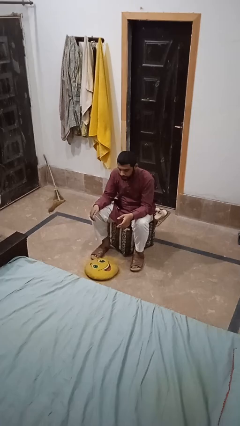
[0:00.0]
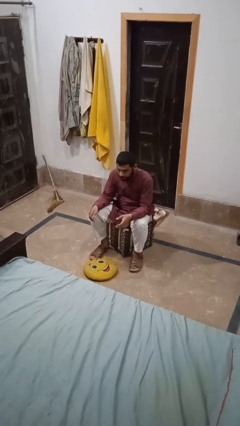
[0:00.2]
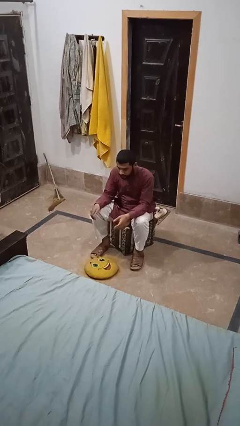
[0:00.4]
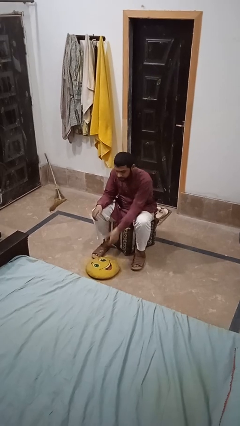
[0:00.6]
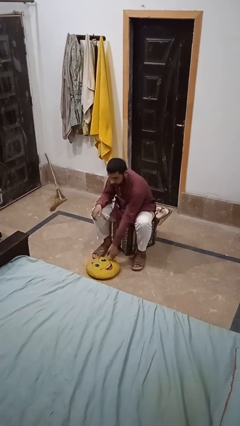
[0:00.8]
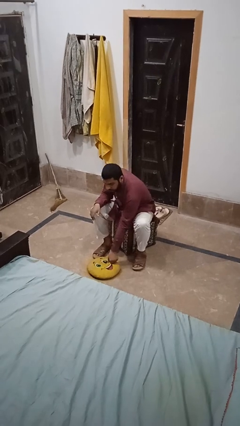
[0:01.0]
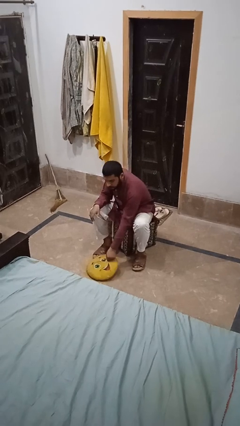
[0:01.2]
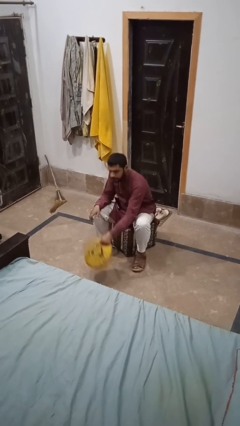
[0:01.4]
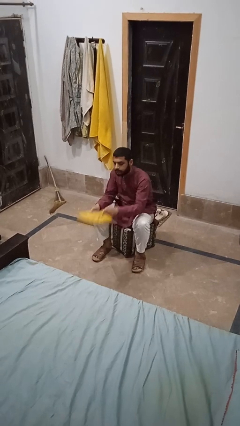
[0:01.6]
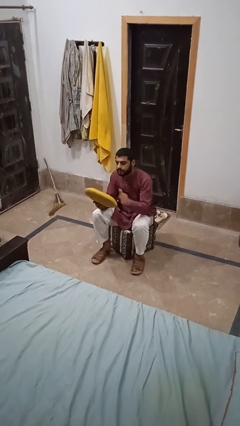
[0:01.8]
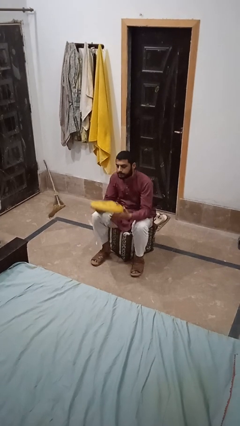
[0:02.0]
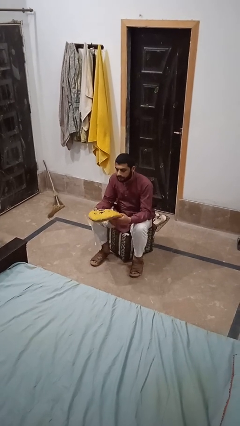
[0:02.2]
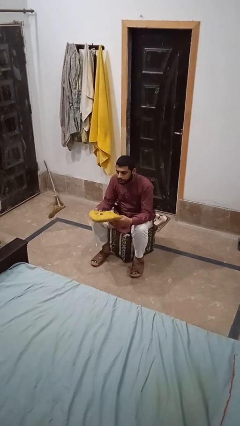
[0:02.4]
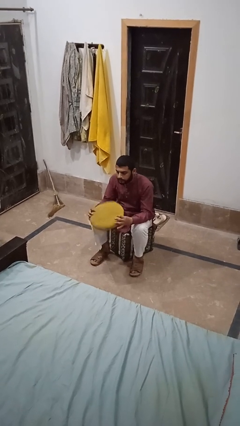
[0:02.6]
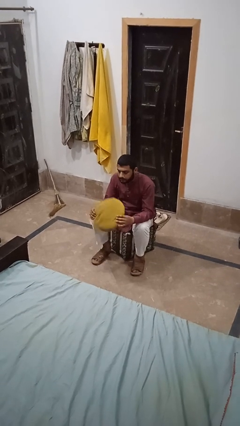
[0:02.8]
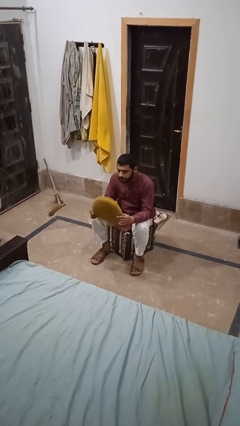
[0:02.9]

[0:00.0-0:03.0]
person picks up object from floor

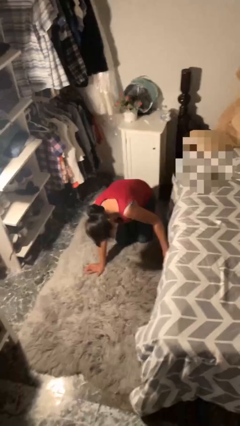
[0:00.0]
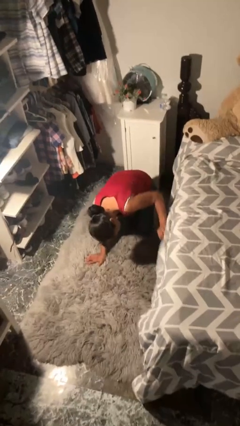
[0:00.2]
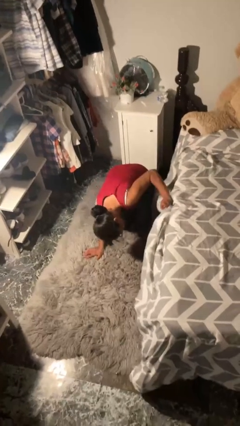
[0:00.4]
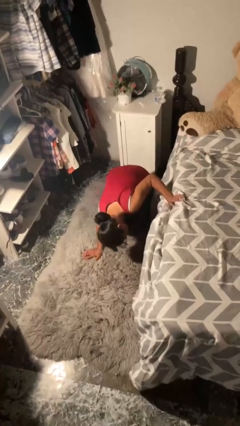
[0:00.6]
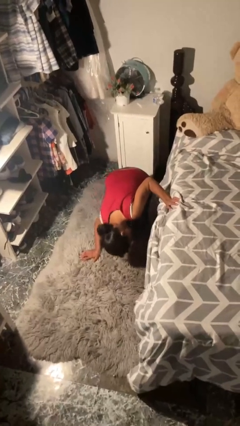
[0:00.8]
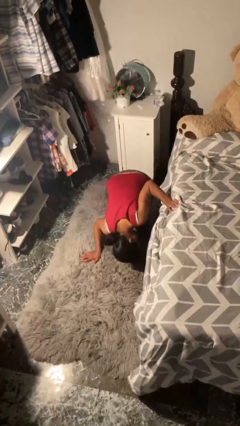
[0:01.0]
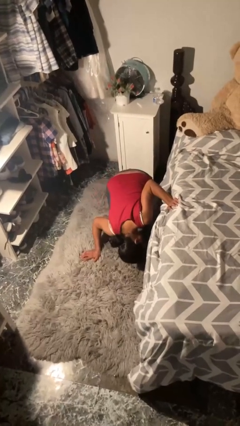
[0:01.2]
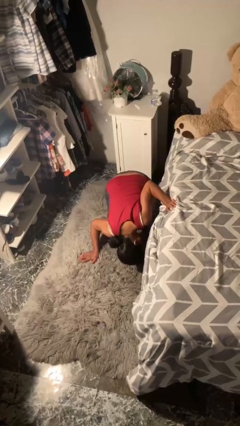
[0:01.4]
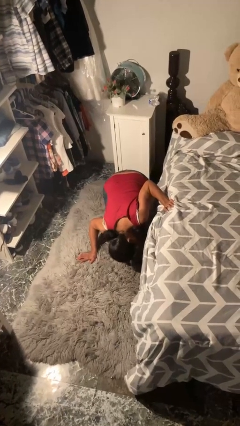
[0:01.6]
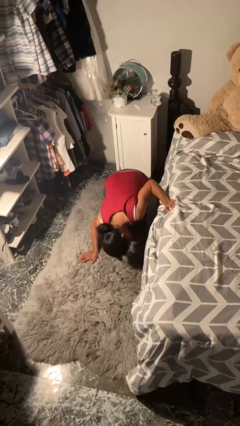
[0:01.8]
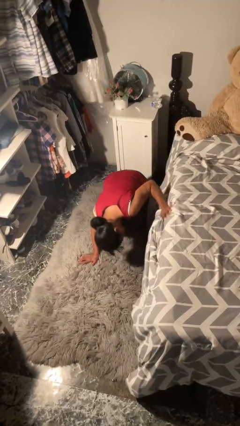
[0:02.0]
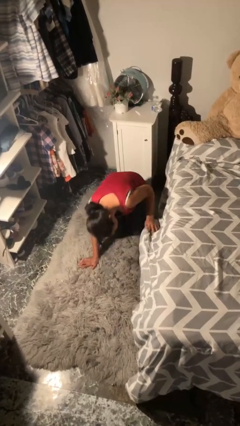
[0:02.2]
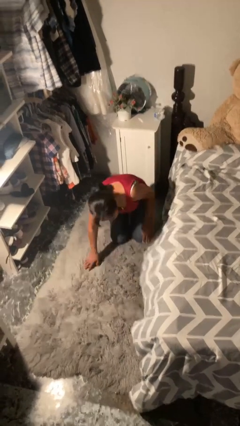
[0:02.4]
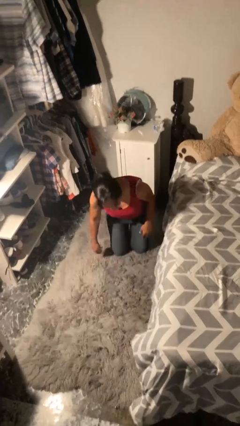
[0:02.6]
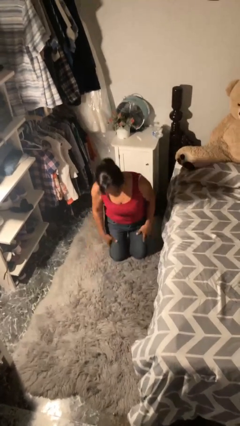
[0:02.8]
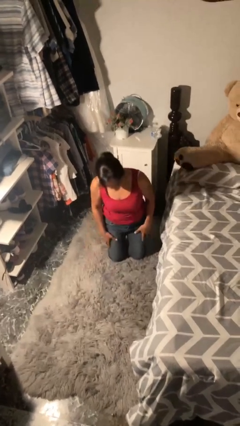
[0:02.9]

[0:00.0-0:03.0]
person searches under bed

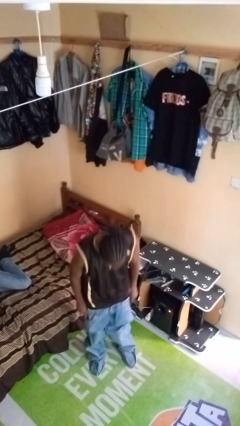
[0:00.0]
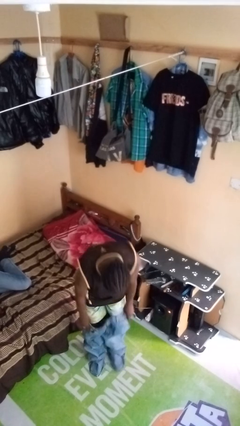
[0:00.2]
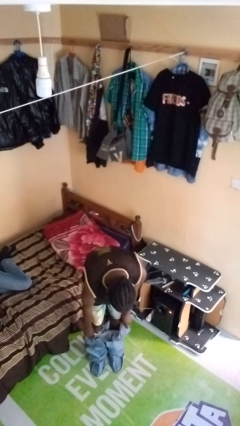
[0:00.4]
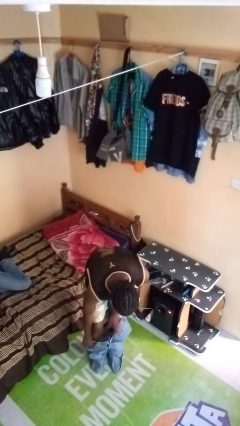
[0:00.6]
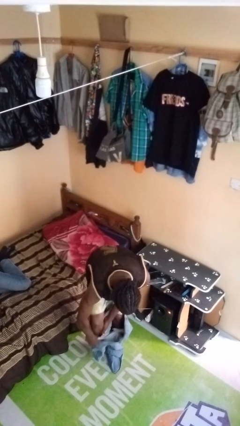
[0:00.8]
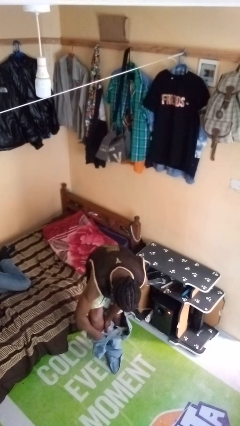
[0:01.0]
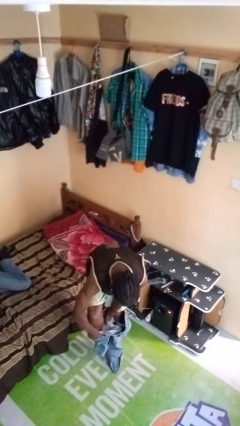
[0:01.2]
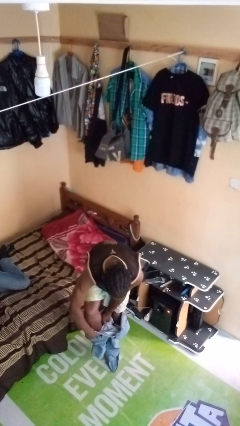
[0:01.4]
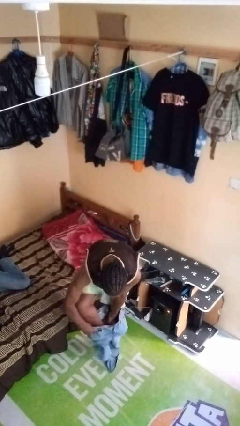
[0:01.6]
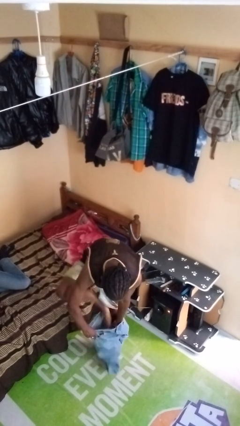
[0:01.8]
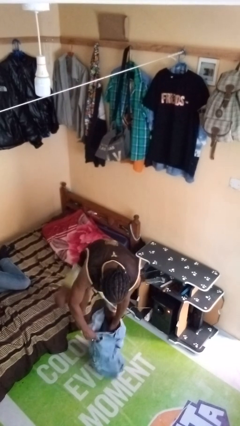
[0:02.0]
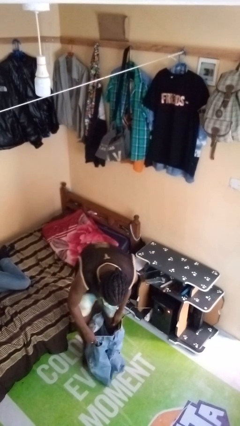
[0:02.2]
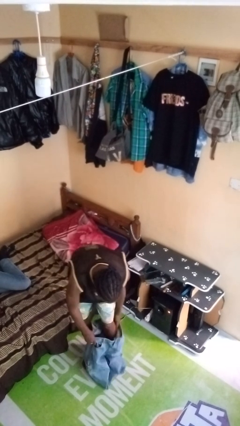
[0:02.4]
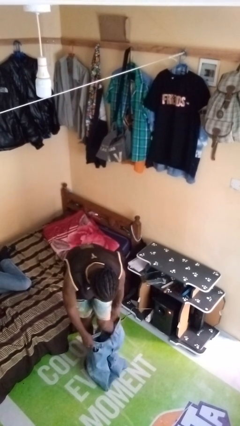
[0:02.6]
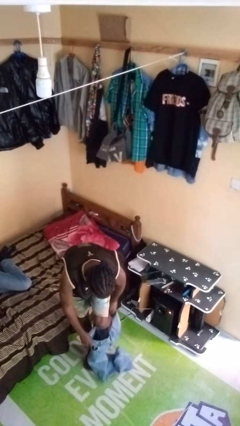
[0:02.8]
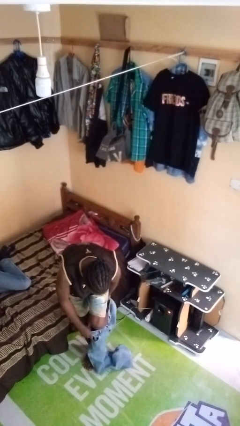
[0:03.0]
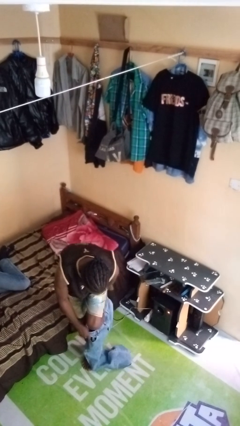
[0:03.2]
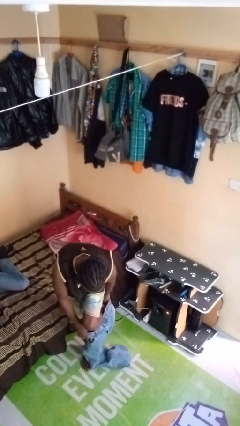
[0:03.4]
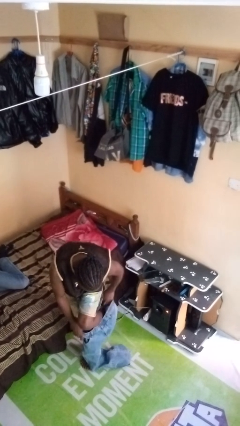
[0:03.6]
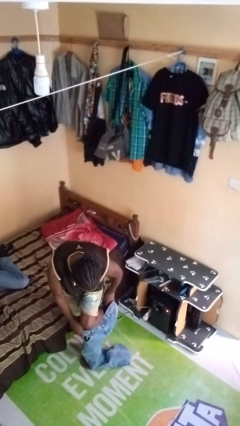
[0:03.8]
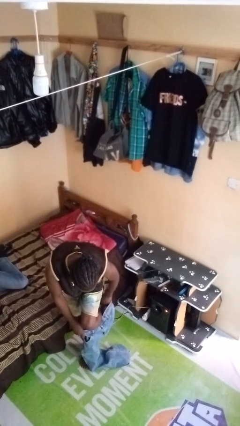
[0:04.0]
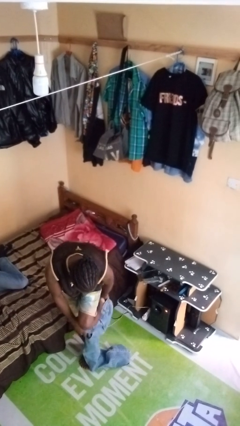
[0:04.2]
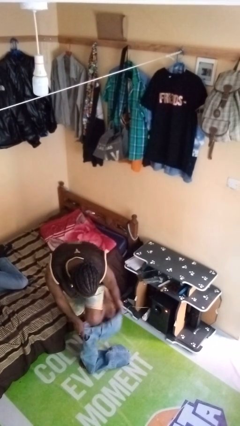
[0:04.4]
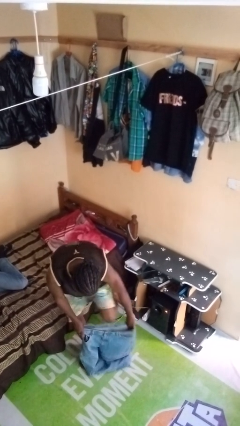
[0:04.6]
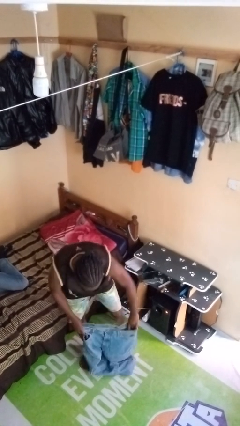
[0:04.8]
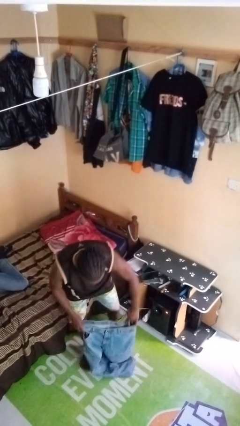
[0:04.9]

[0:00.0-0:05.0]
person takes off pants

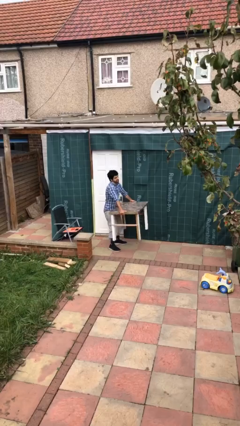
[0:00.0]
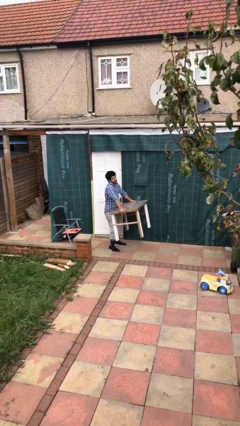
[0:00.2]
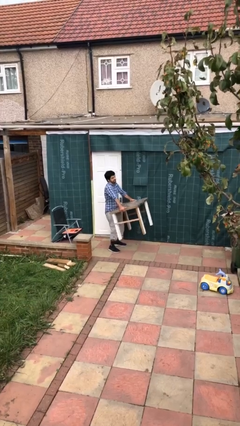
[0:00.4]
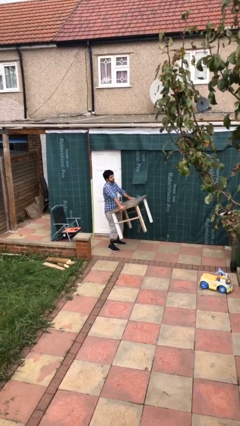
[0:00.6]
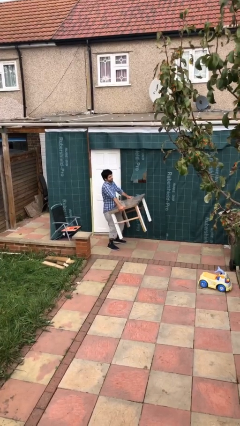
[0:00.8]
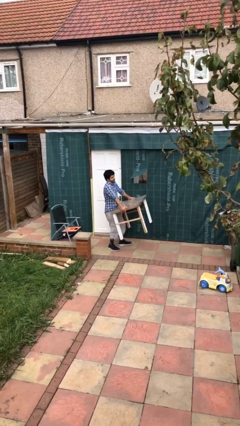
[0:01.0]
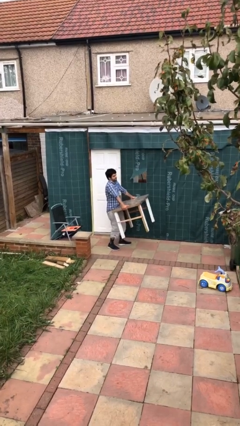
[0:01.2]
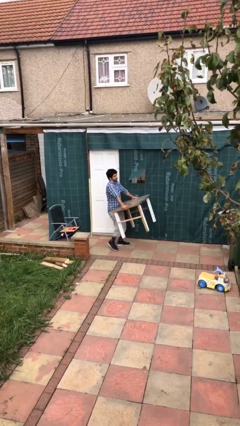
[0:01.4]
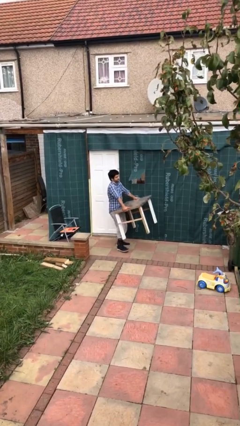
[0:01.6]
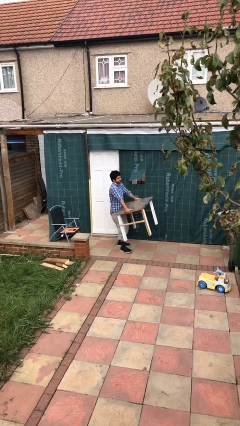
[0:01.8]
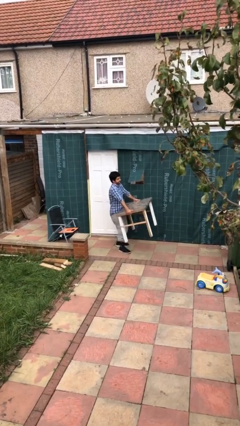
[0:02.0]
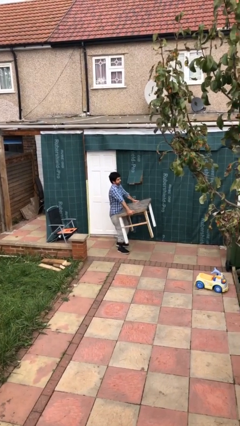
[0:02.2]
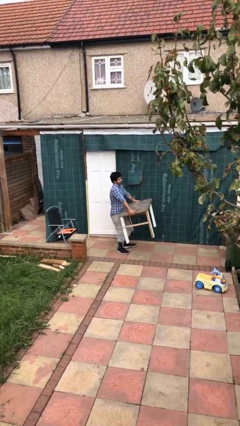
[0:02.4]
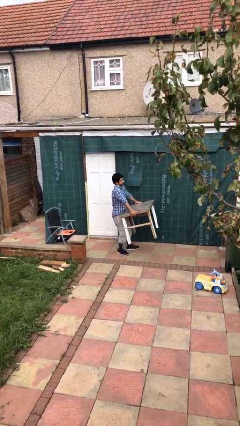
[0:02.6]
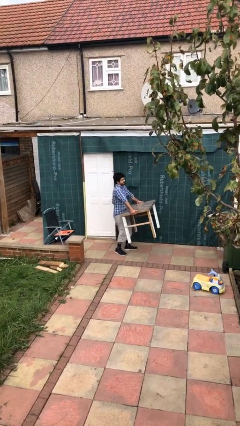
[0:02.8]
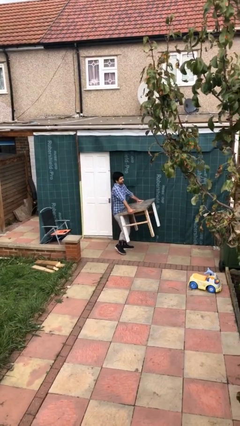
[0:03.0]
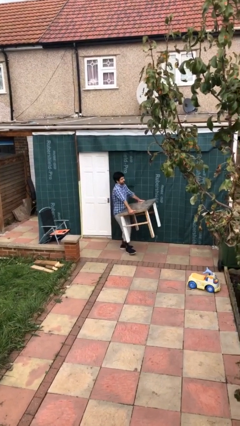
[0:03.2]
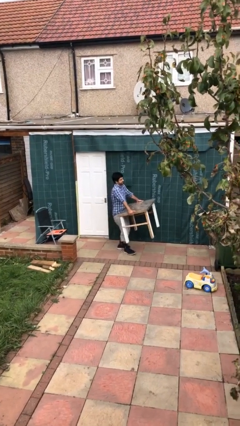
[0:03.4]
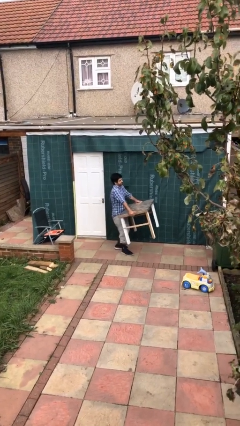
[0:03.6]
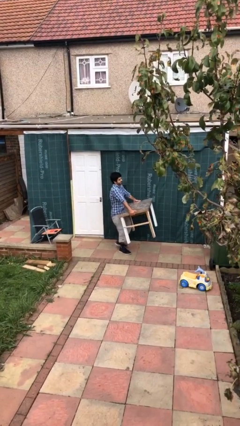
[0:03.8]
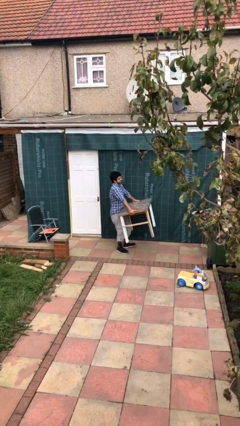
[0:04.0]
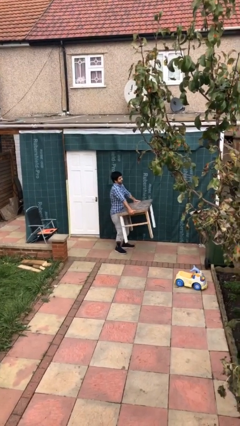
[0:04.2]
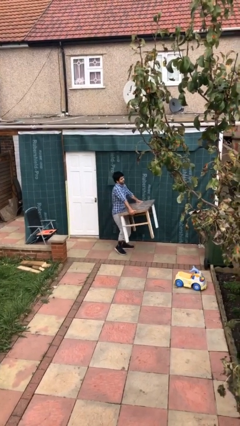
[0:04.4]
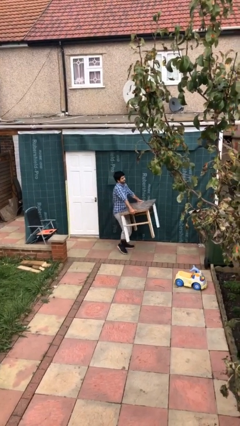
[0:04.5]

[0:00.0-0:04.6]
person carries heavy object

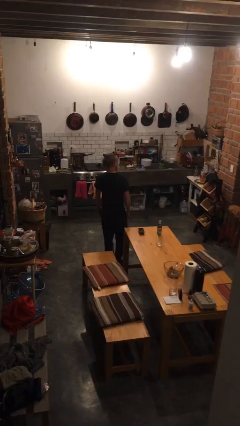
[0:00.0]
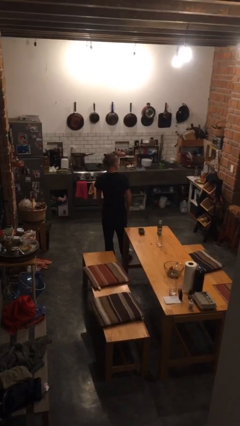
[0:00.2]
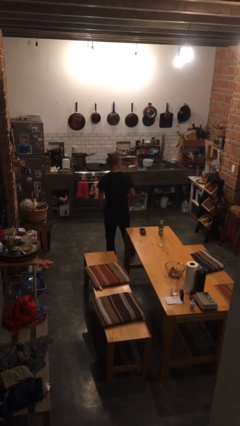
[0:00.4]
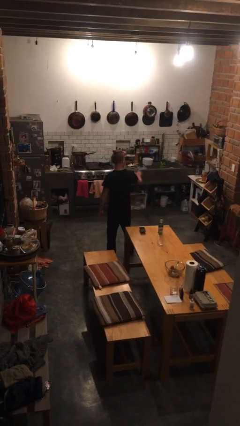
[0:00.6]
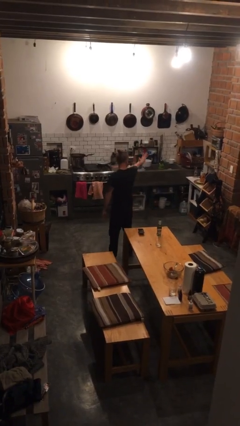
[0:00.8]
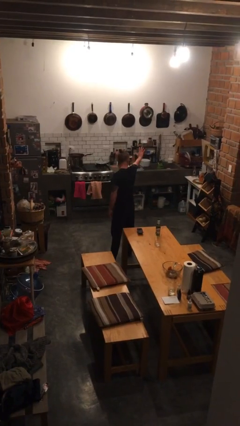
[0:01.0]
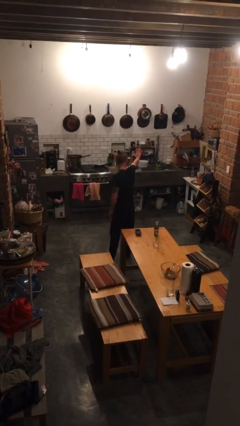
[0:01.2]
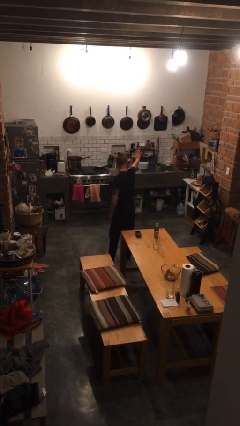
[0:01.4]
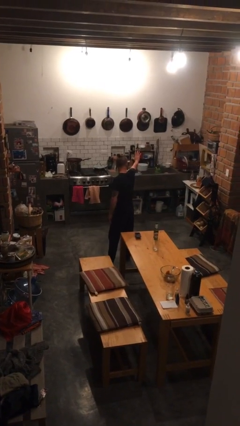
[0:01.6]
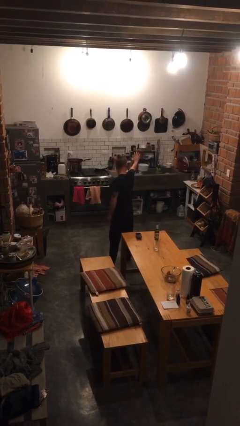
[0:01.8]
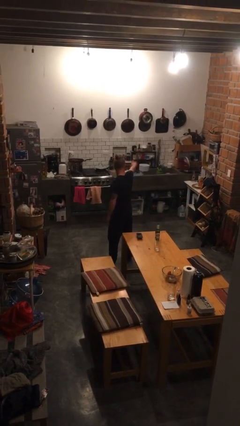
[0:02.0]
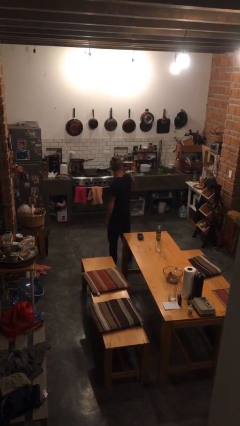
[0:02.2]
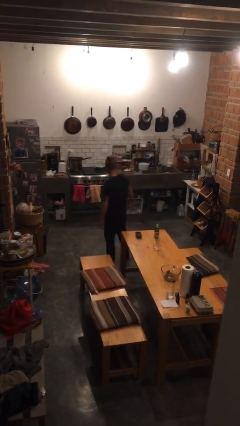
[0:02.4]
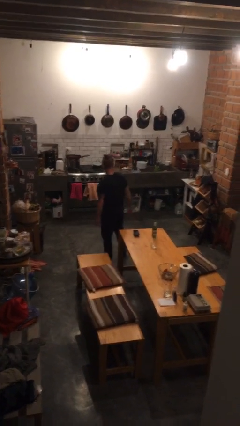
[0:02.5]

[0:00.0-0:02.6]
person gestures stop
